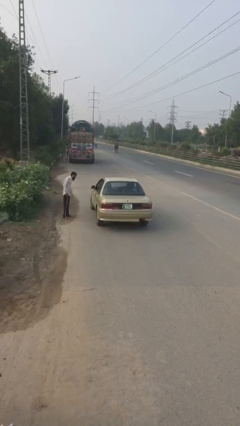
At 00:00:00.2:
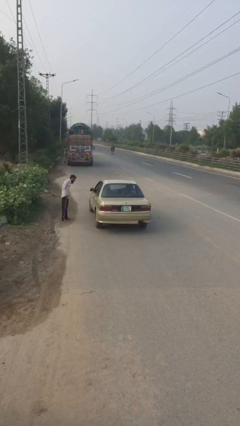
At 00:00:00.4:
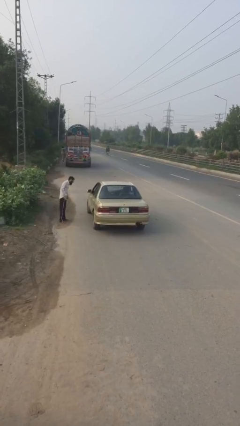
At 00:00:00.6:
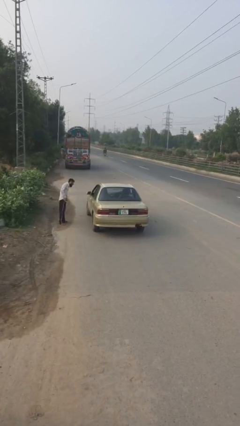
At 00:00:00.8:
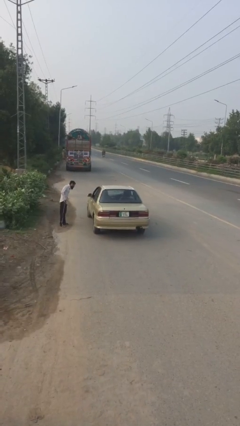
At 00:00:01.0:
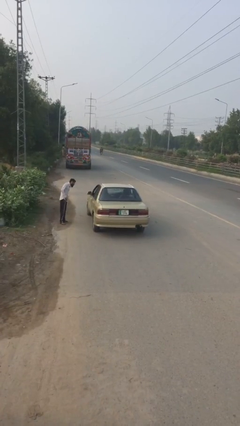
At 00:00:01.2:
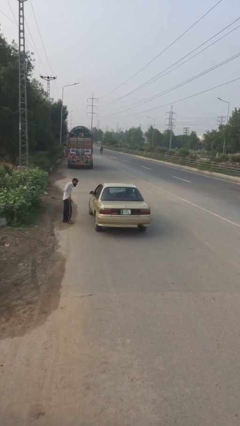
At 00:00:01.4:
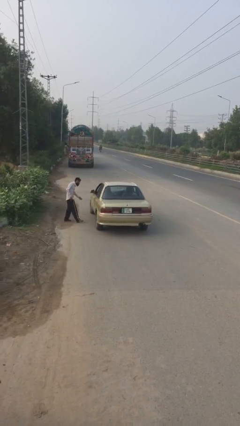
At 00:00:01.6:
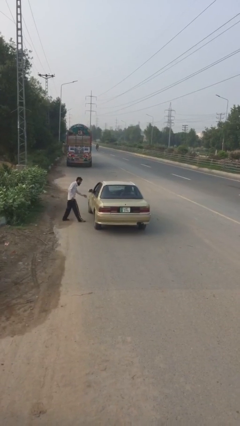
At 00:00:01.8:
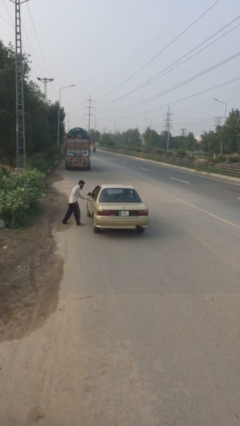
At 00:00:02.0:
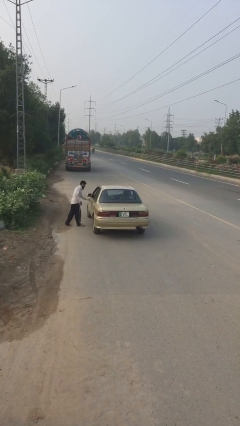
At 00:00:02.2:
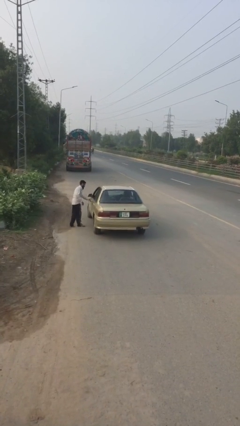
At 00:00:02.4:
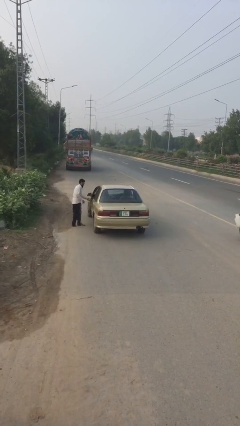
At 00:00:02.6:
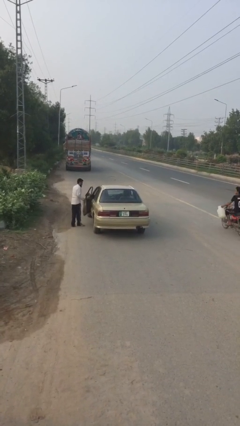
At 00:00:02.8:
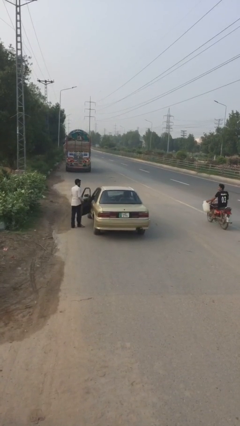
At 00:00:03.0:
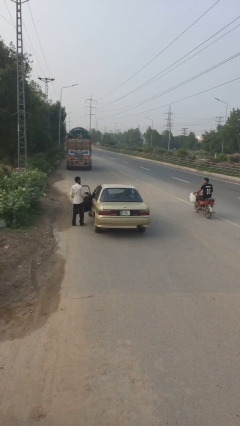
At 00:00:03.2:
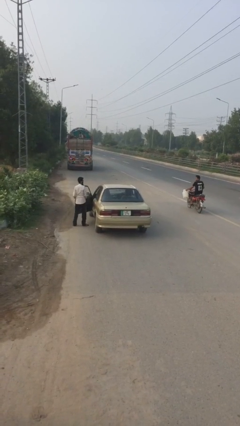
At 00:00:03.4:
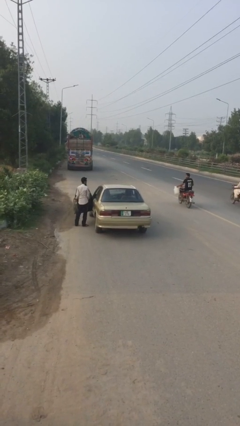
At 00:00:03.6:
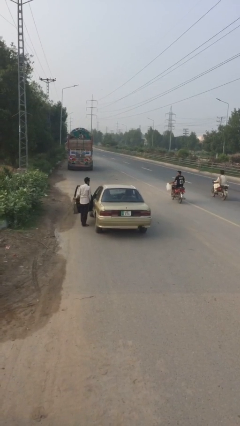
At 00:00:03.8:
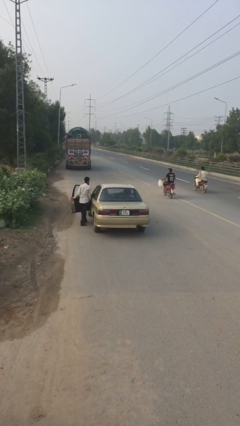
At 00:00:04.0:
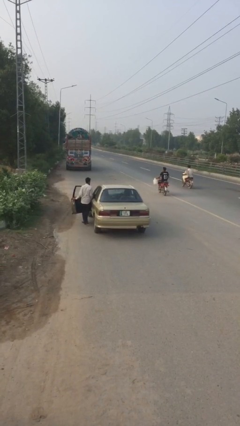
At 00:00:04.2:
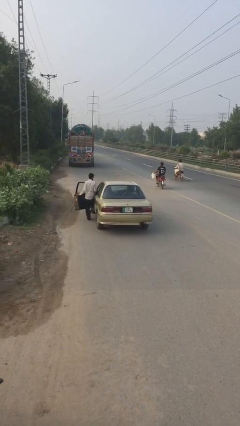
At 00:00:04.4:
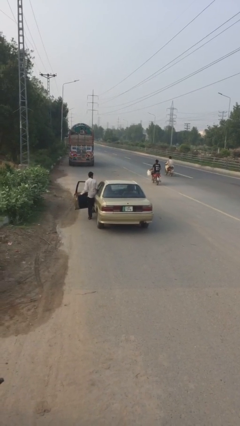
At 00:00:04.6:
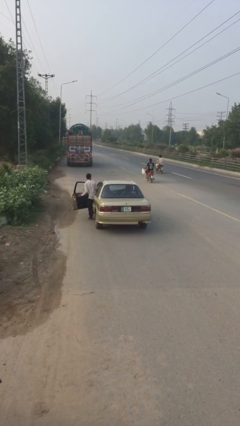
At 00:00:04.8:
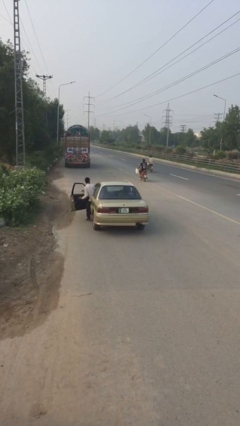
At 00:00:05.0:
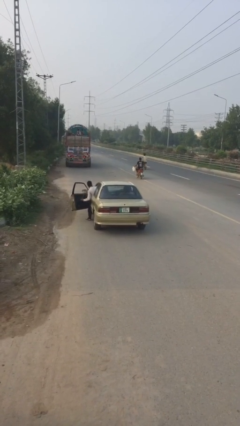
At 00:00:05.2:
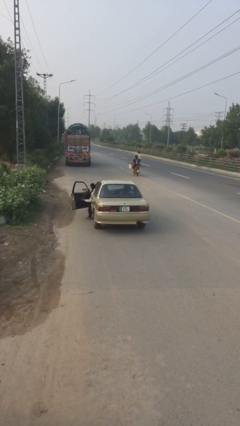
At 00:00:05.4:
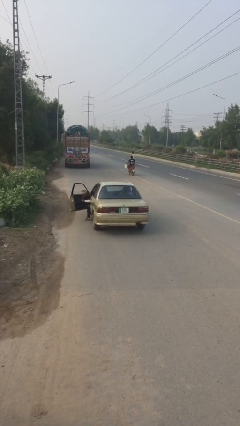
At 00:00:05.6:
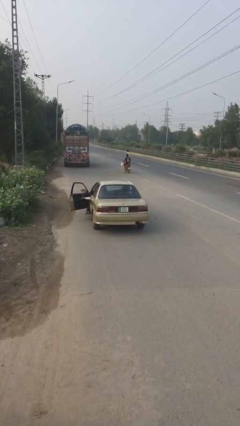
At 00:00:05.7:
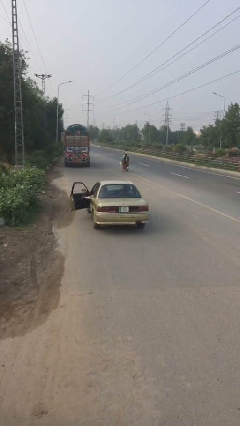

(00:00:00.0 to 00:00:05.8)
car picks up person

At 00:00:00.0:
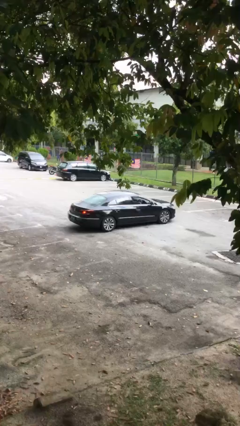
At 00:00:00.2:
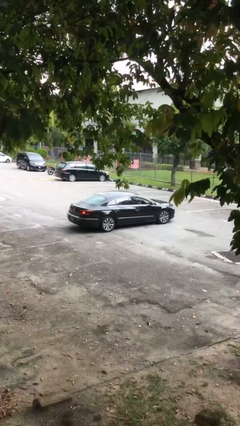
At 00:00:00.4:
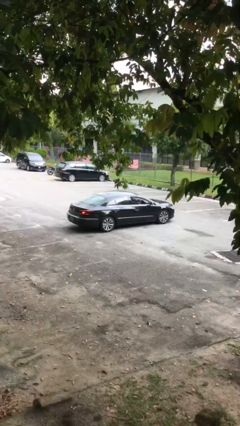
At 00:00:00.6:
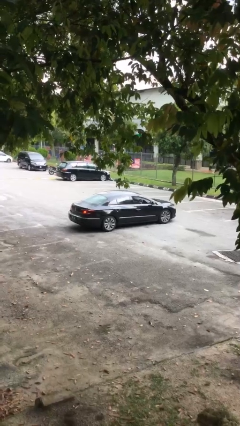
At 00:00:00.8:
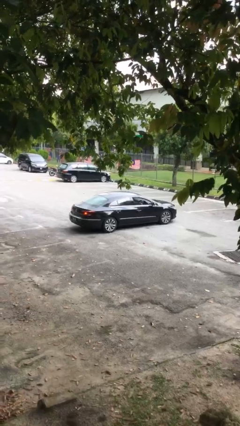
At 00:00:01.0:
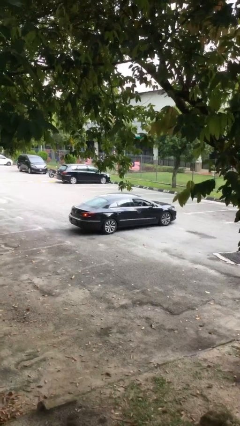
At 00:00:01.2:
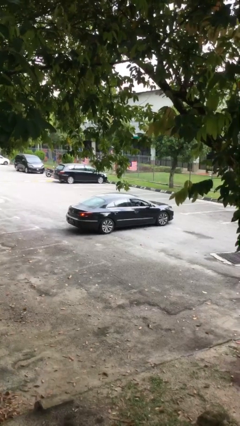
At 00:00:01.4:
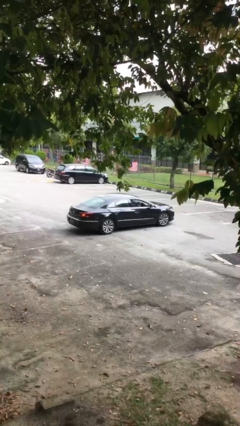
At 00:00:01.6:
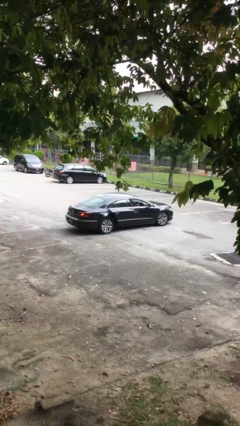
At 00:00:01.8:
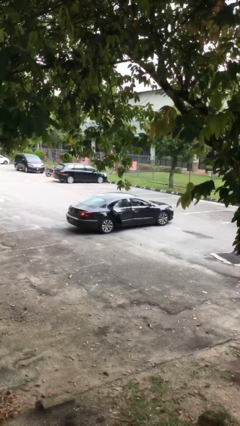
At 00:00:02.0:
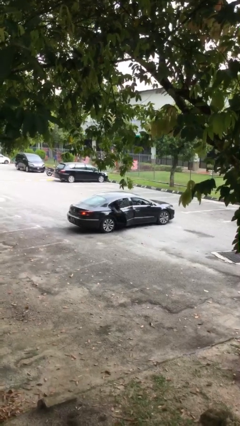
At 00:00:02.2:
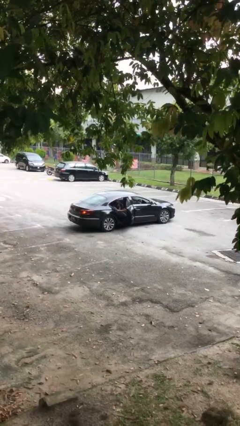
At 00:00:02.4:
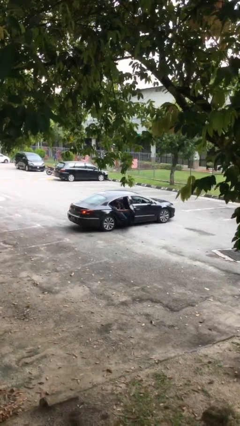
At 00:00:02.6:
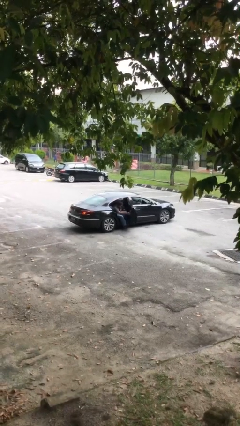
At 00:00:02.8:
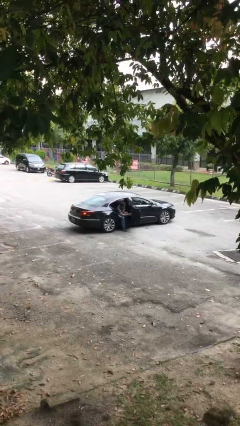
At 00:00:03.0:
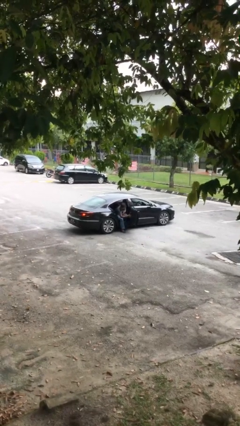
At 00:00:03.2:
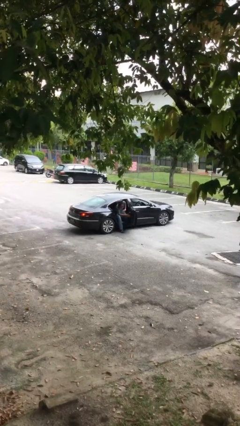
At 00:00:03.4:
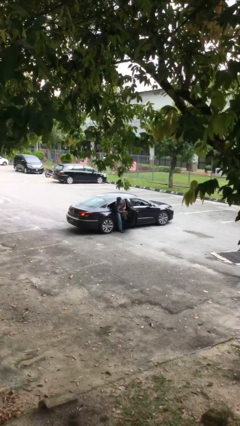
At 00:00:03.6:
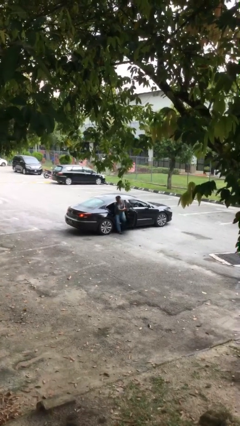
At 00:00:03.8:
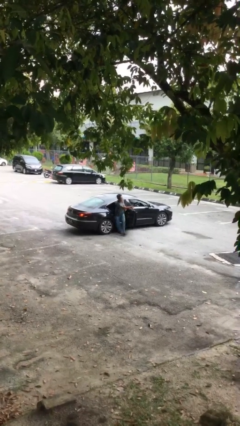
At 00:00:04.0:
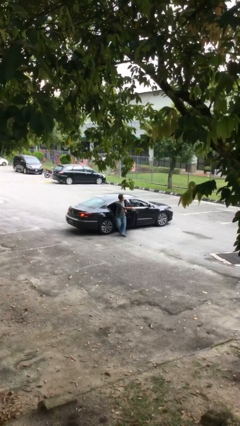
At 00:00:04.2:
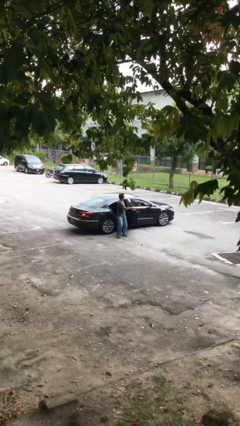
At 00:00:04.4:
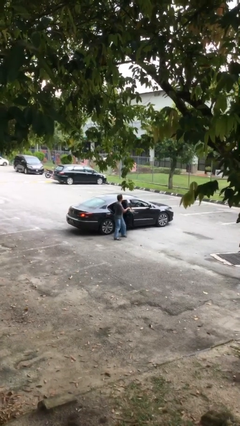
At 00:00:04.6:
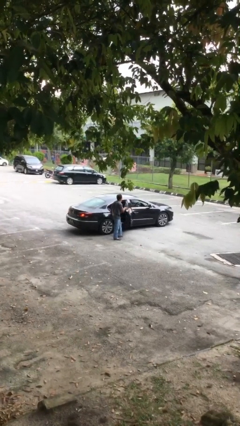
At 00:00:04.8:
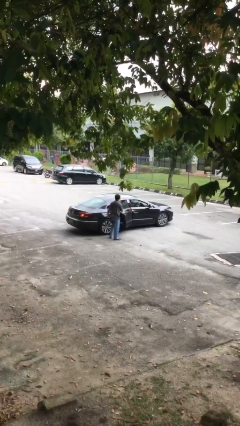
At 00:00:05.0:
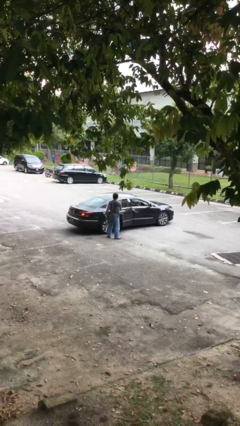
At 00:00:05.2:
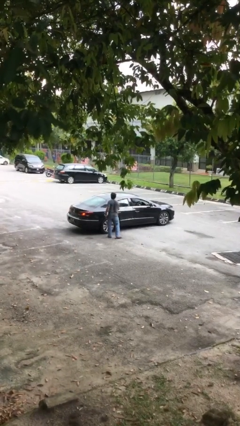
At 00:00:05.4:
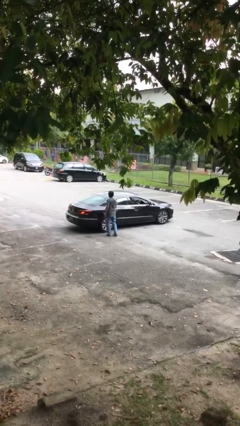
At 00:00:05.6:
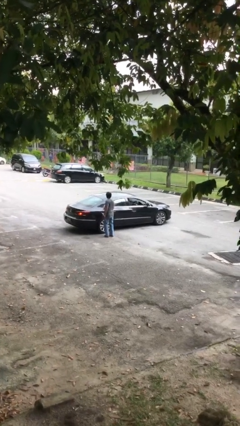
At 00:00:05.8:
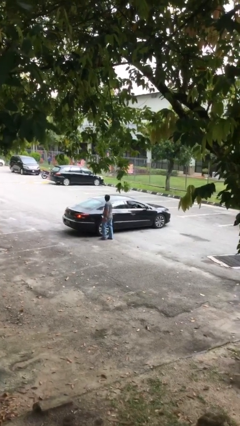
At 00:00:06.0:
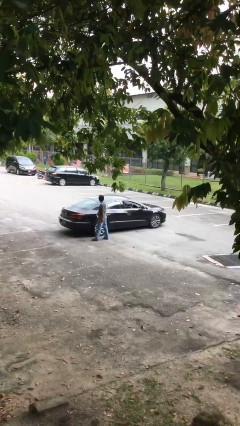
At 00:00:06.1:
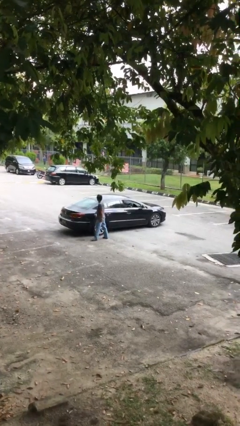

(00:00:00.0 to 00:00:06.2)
car drops off person

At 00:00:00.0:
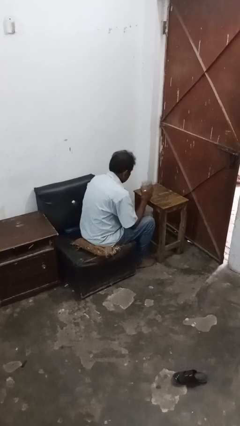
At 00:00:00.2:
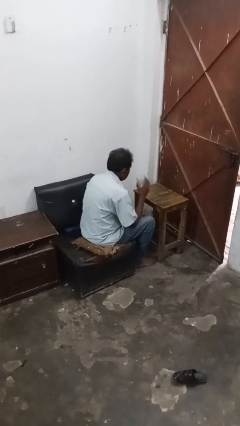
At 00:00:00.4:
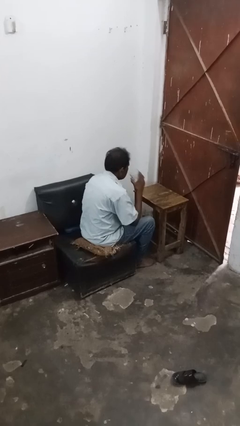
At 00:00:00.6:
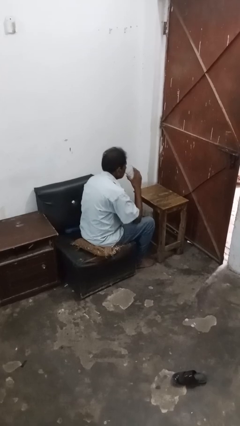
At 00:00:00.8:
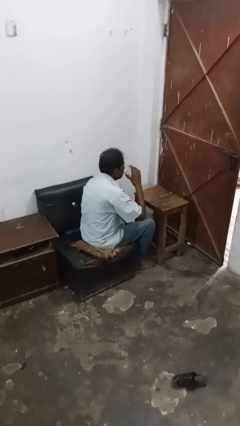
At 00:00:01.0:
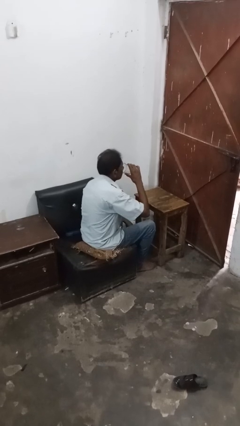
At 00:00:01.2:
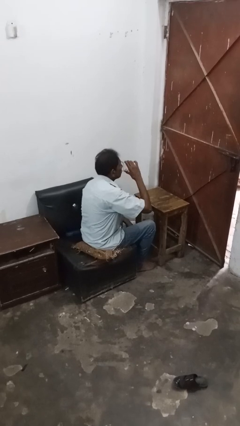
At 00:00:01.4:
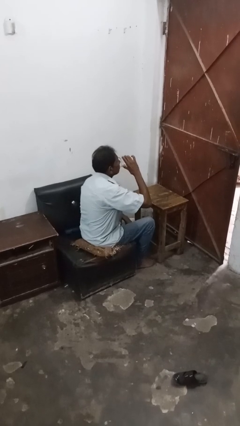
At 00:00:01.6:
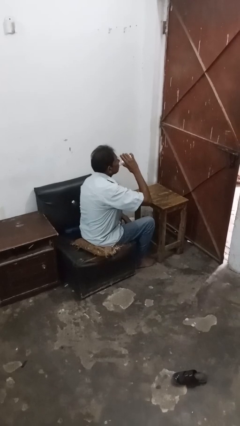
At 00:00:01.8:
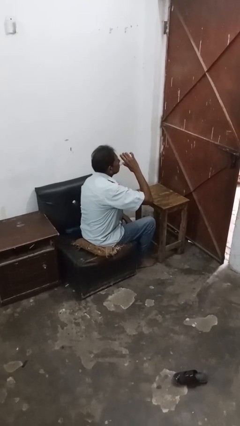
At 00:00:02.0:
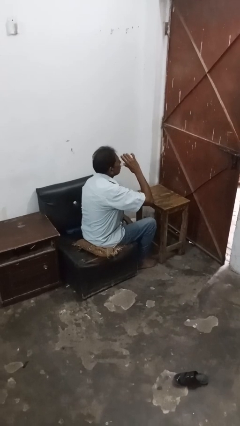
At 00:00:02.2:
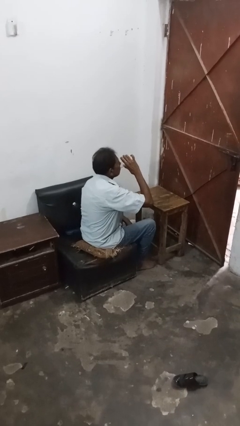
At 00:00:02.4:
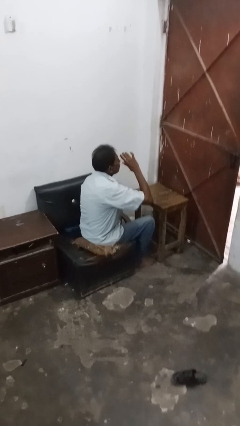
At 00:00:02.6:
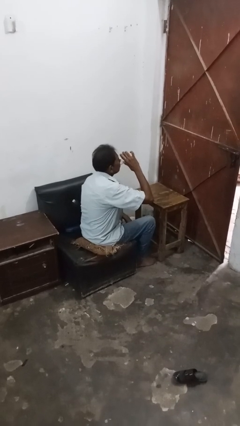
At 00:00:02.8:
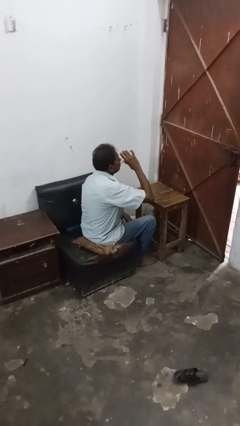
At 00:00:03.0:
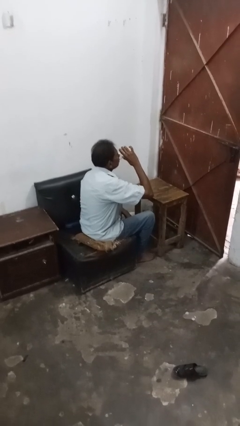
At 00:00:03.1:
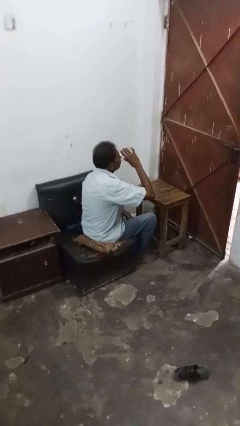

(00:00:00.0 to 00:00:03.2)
person drinks from shotglass

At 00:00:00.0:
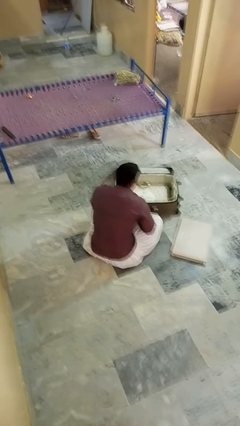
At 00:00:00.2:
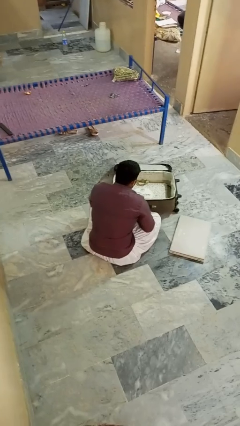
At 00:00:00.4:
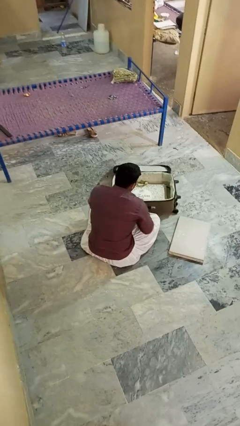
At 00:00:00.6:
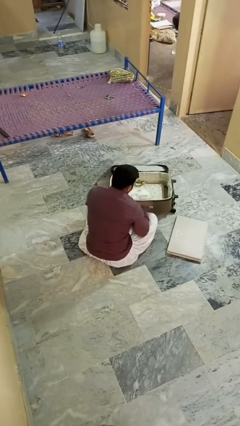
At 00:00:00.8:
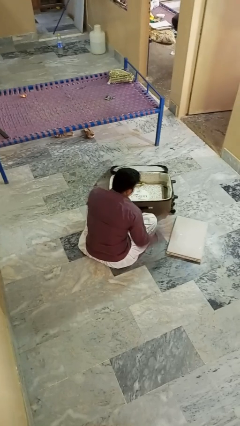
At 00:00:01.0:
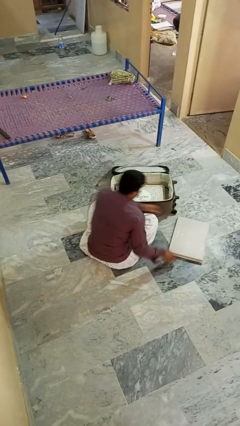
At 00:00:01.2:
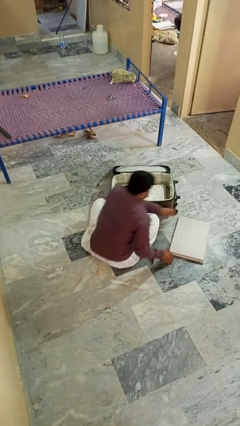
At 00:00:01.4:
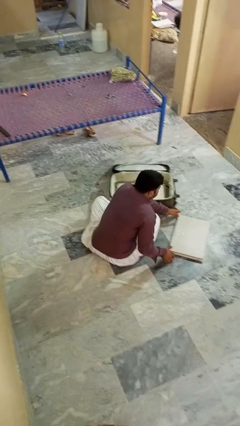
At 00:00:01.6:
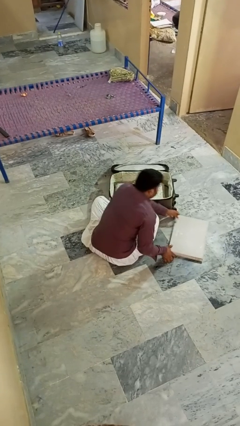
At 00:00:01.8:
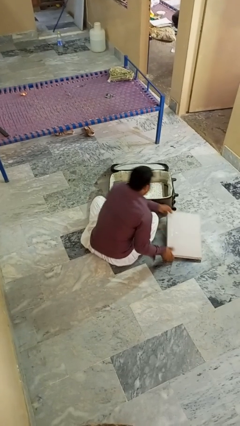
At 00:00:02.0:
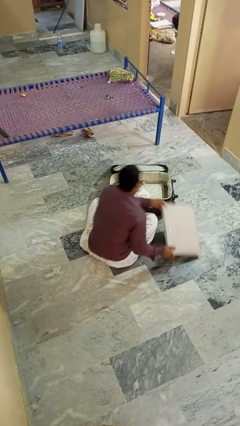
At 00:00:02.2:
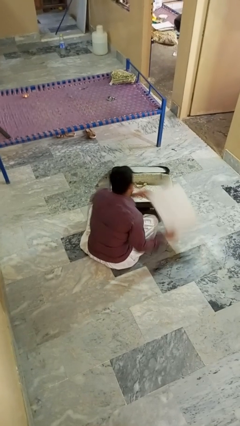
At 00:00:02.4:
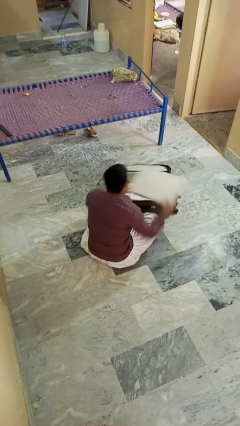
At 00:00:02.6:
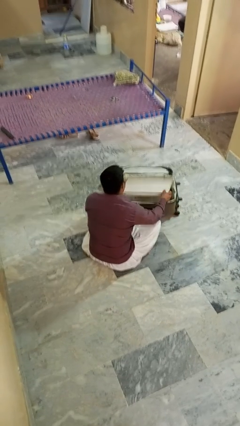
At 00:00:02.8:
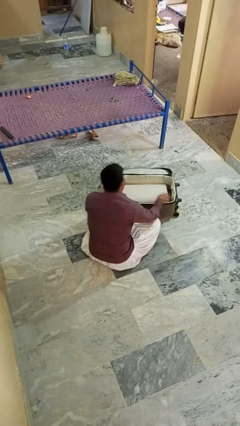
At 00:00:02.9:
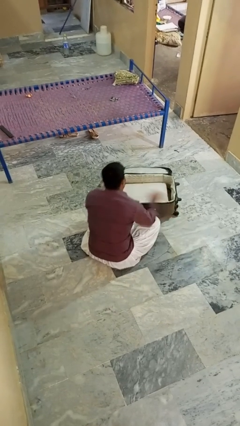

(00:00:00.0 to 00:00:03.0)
person puts object into bag
